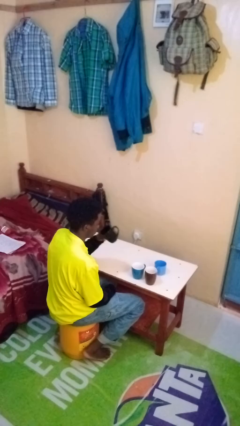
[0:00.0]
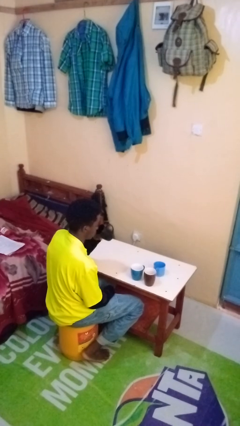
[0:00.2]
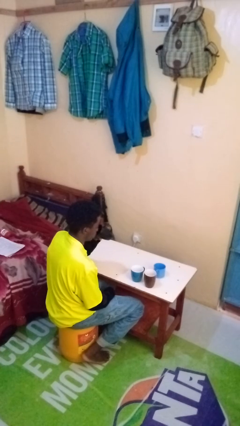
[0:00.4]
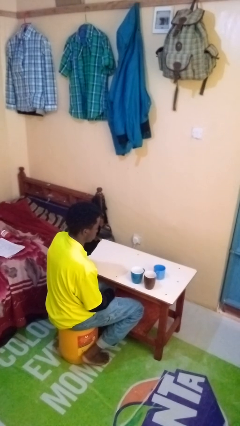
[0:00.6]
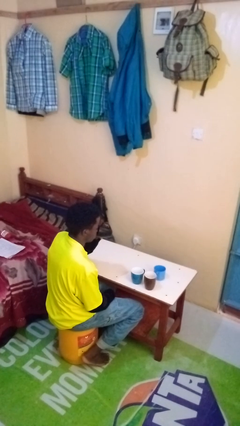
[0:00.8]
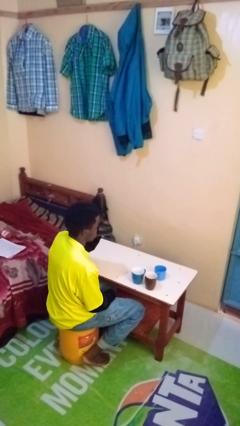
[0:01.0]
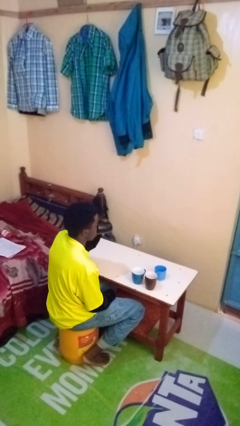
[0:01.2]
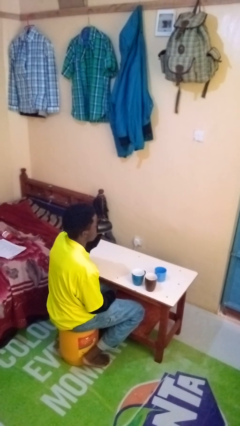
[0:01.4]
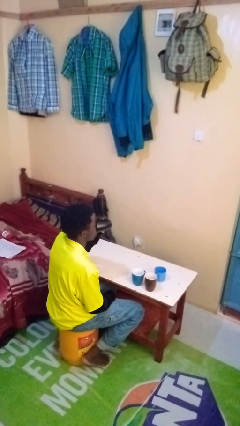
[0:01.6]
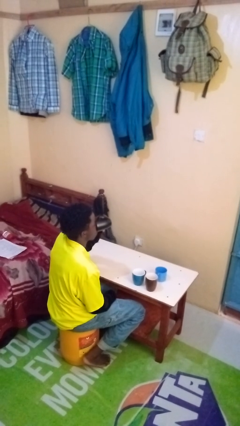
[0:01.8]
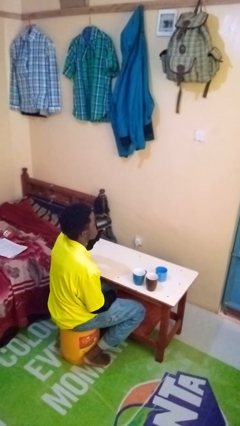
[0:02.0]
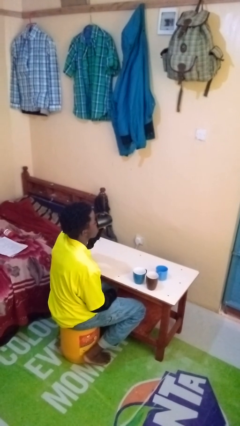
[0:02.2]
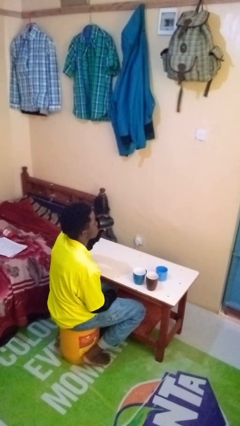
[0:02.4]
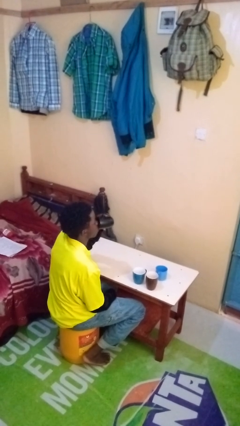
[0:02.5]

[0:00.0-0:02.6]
person drinks from shotglass

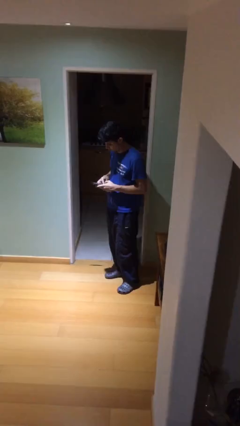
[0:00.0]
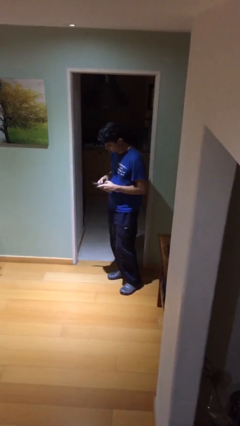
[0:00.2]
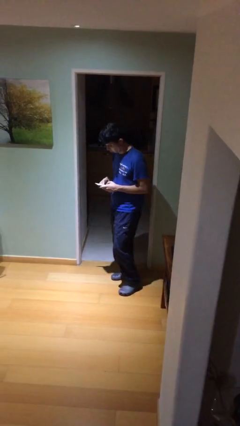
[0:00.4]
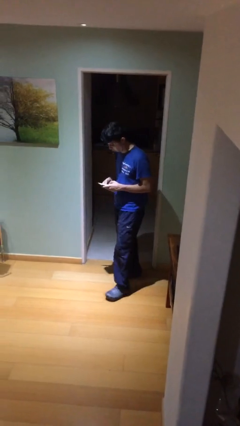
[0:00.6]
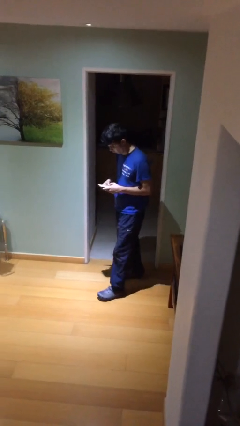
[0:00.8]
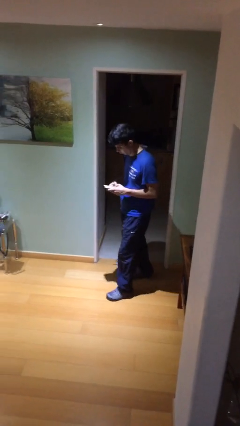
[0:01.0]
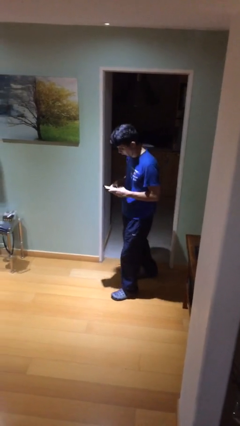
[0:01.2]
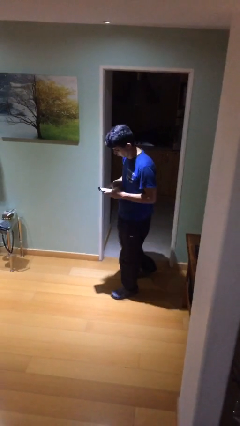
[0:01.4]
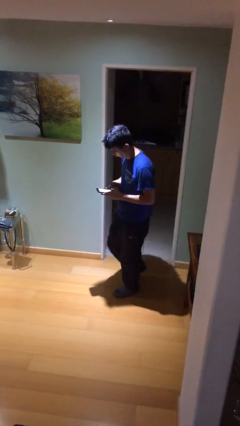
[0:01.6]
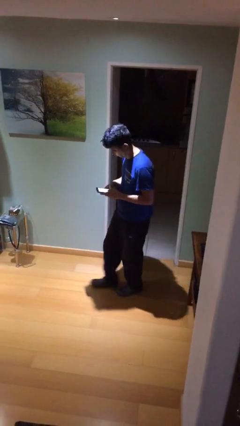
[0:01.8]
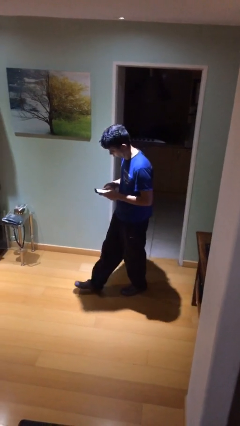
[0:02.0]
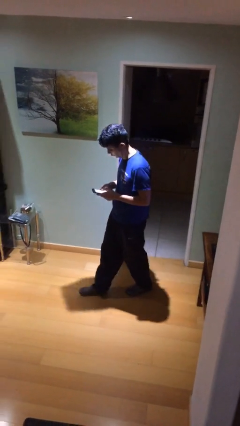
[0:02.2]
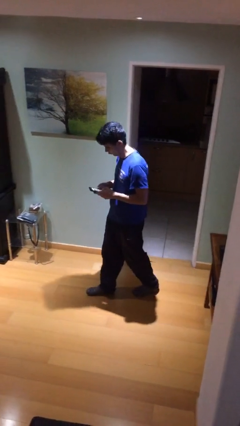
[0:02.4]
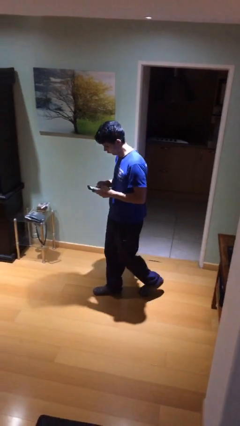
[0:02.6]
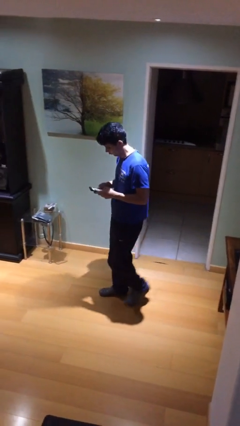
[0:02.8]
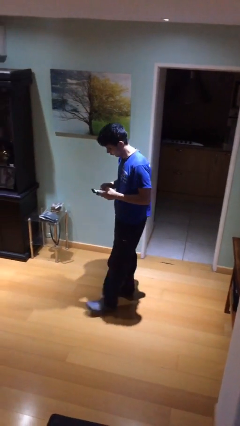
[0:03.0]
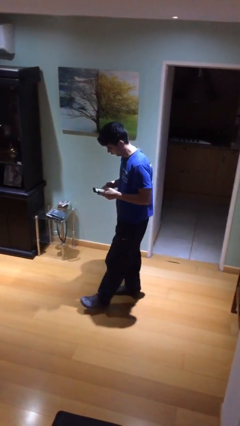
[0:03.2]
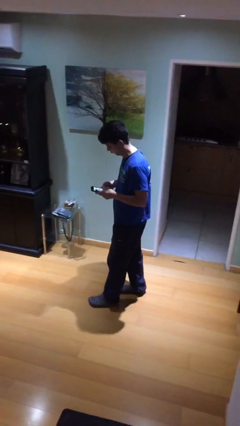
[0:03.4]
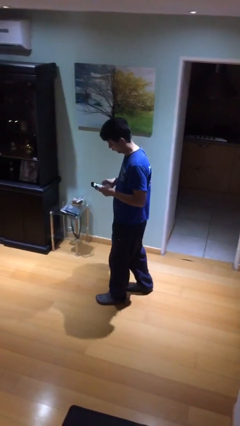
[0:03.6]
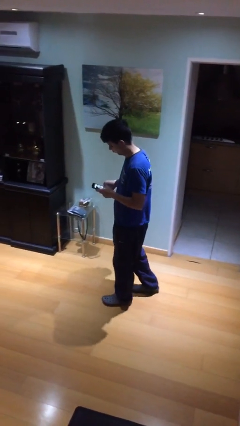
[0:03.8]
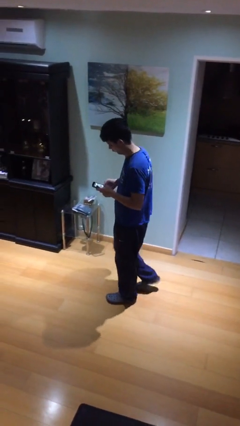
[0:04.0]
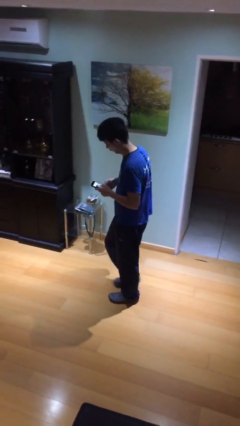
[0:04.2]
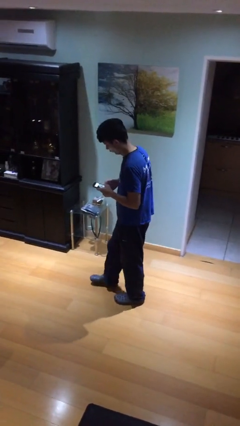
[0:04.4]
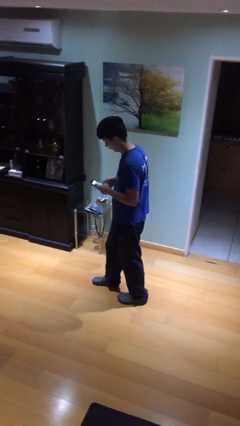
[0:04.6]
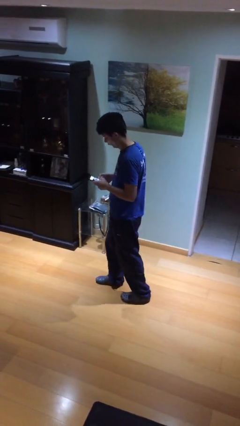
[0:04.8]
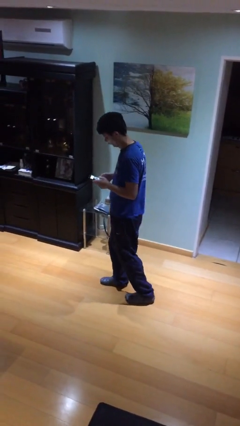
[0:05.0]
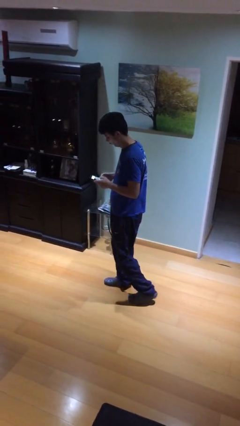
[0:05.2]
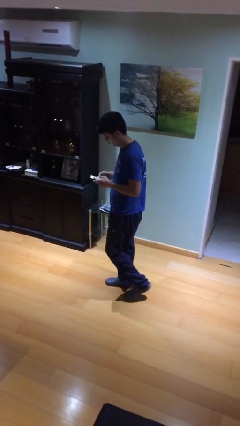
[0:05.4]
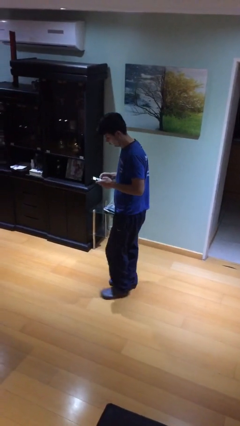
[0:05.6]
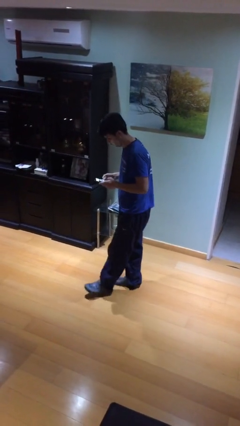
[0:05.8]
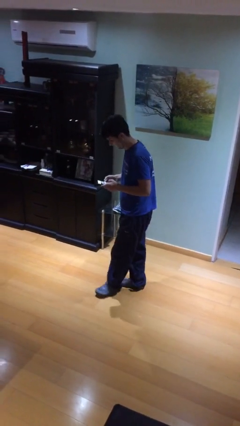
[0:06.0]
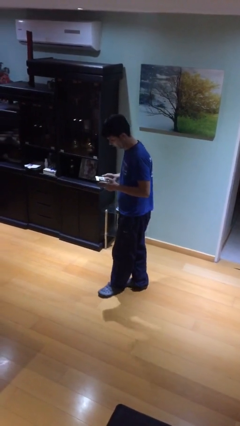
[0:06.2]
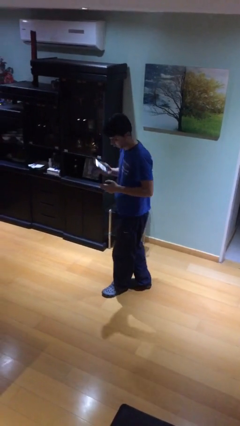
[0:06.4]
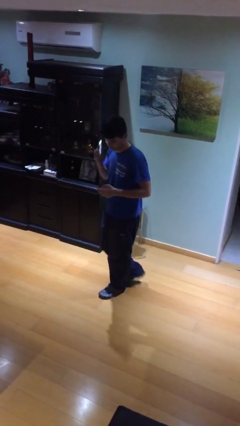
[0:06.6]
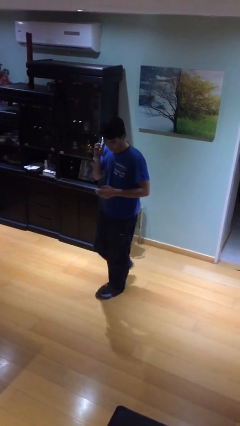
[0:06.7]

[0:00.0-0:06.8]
person texts on phone

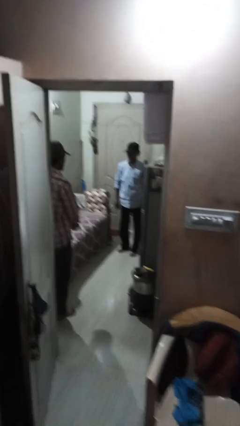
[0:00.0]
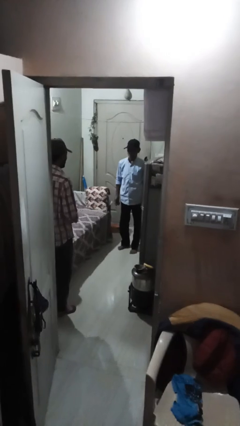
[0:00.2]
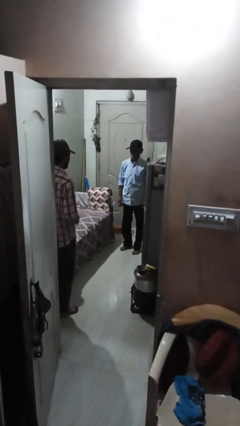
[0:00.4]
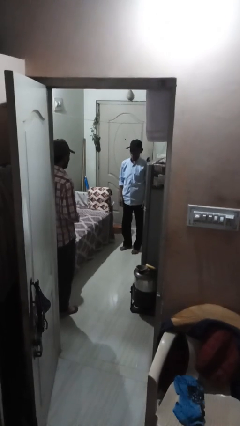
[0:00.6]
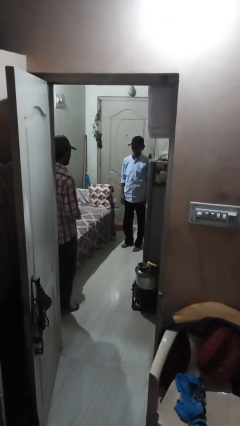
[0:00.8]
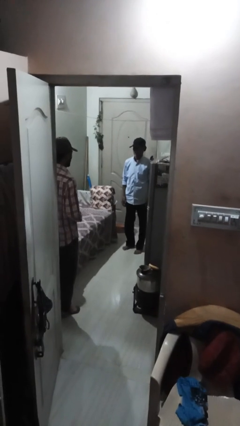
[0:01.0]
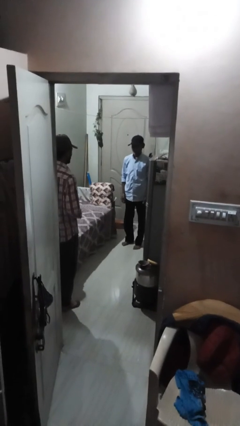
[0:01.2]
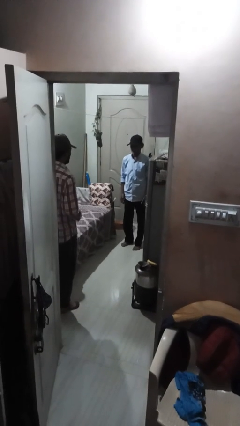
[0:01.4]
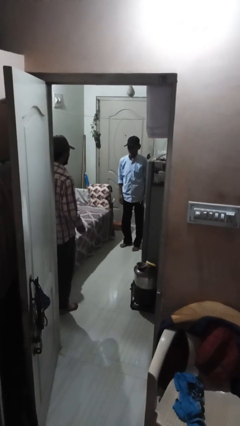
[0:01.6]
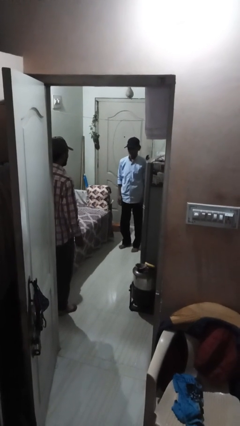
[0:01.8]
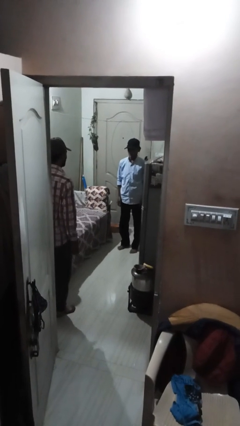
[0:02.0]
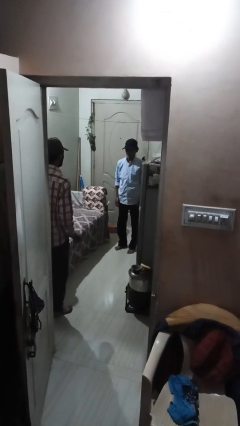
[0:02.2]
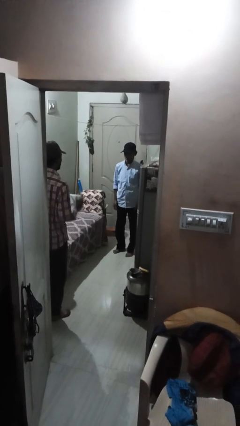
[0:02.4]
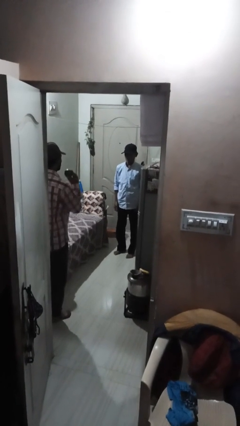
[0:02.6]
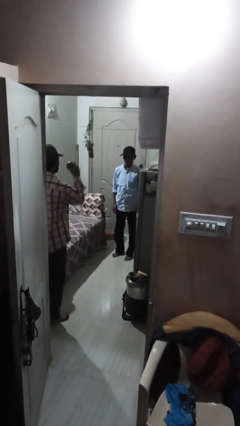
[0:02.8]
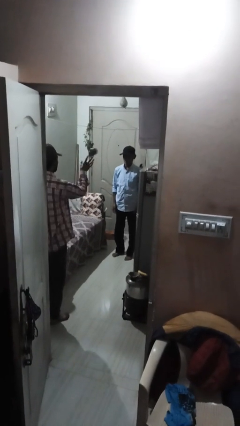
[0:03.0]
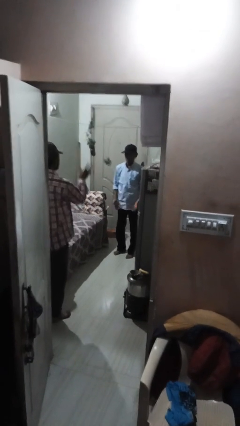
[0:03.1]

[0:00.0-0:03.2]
person throws object to person

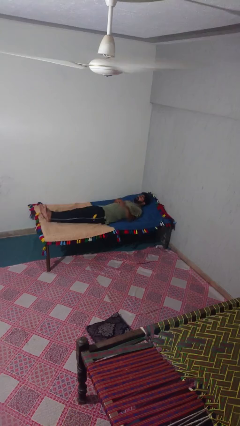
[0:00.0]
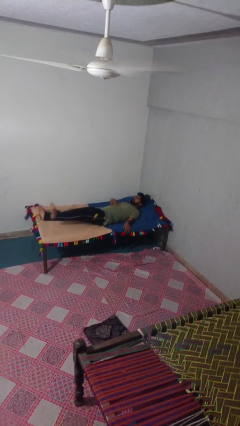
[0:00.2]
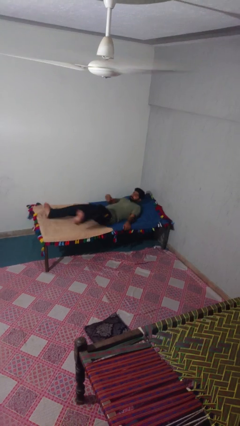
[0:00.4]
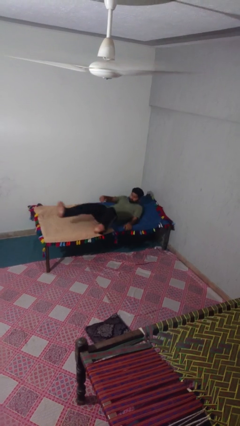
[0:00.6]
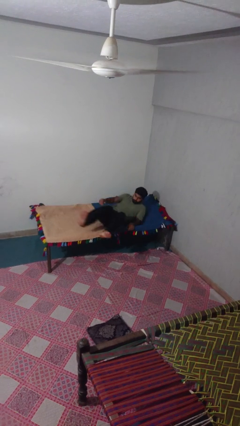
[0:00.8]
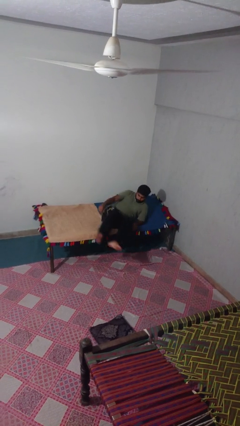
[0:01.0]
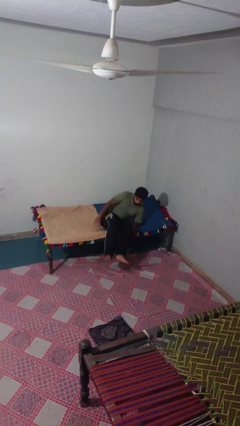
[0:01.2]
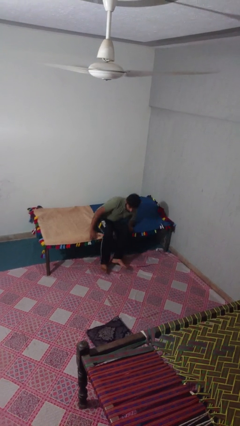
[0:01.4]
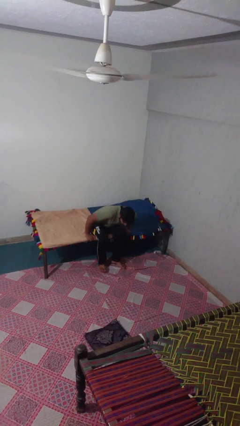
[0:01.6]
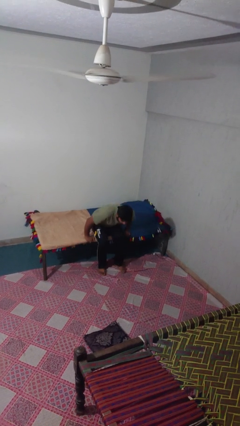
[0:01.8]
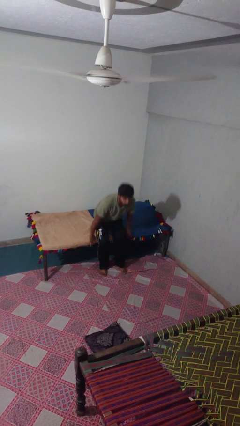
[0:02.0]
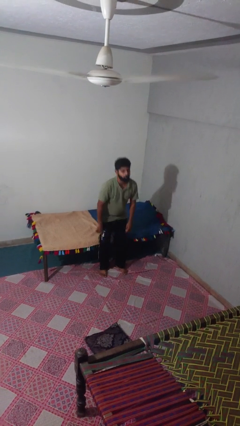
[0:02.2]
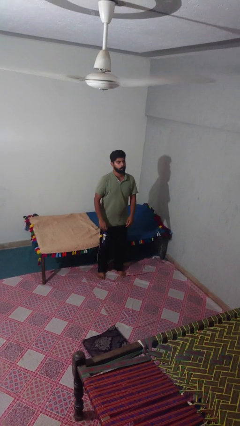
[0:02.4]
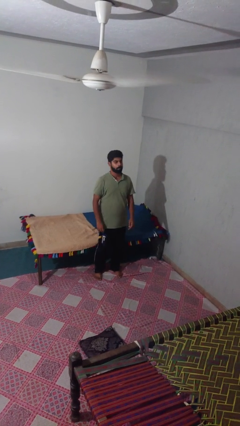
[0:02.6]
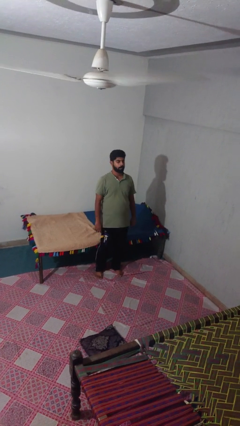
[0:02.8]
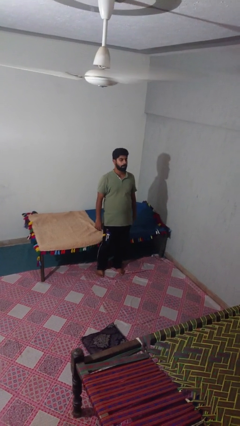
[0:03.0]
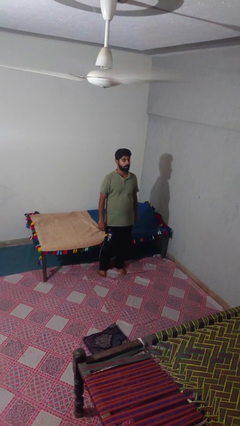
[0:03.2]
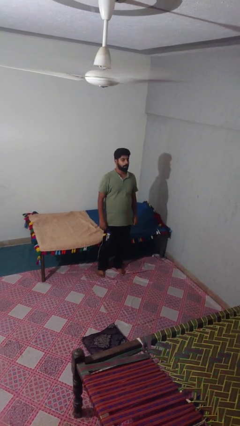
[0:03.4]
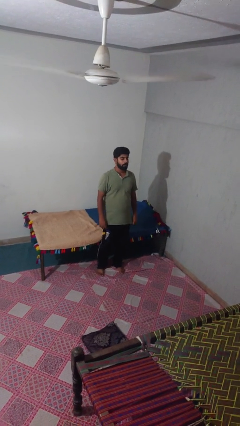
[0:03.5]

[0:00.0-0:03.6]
person stands up

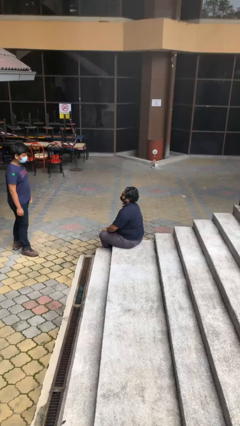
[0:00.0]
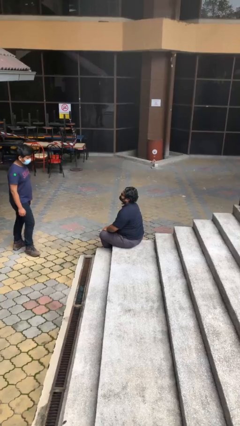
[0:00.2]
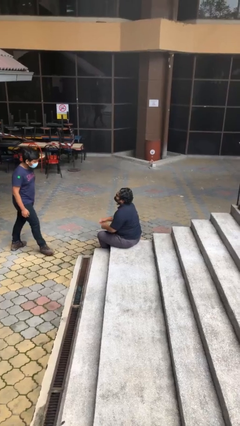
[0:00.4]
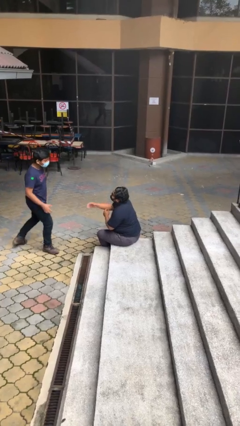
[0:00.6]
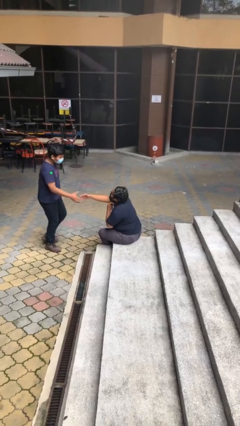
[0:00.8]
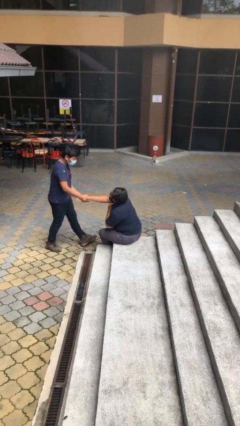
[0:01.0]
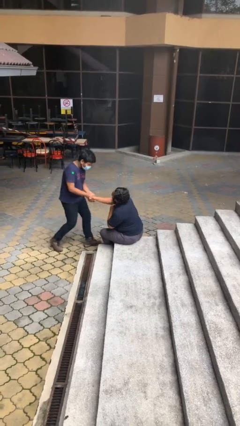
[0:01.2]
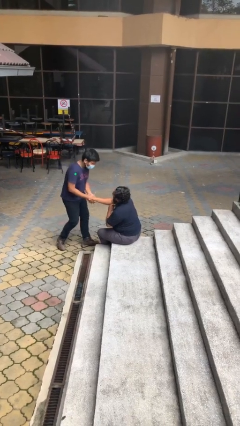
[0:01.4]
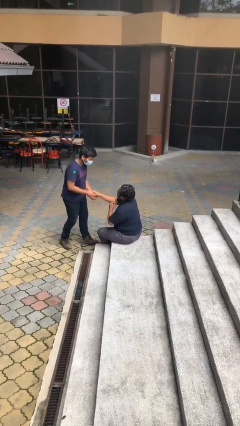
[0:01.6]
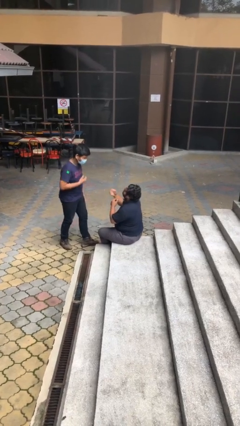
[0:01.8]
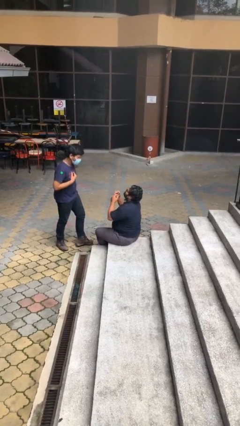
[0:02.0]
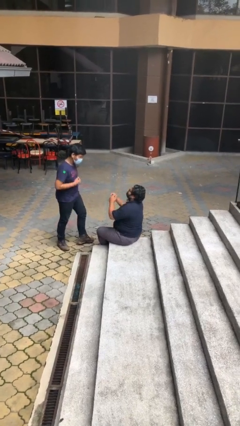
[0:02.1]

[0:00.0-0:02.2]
person shakes hand
